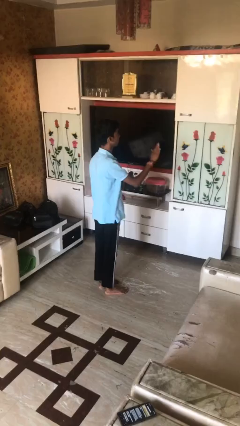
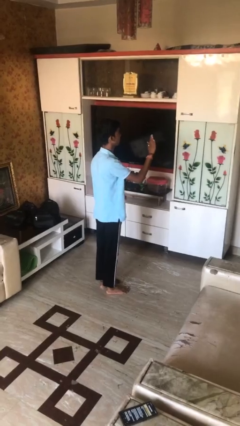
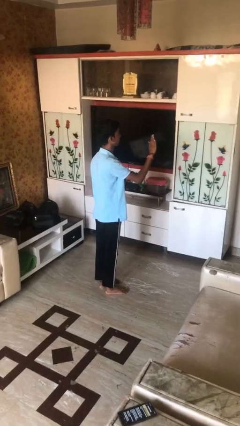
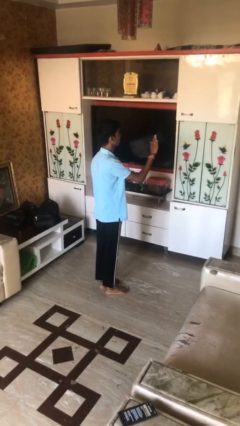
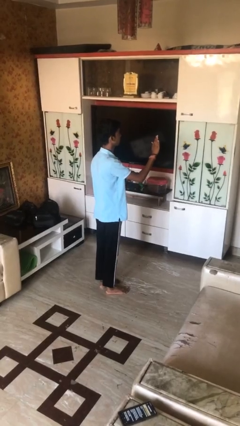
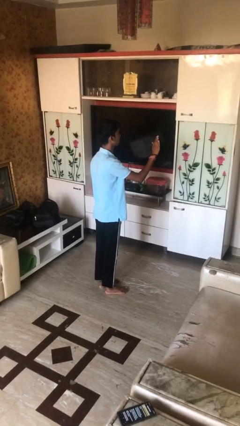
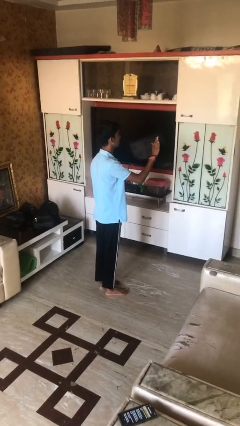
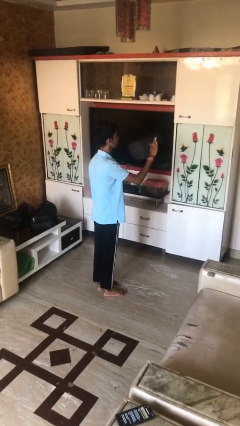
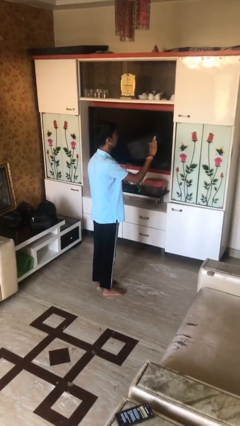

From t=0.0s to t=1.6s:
person gestures swipe up

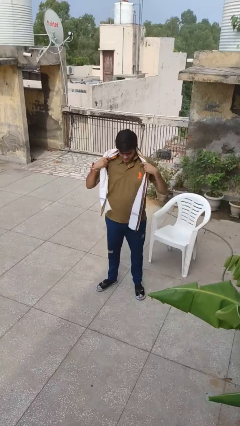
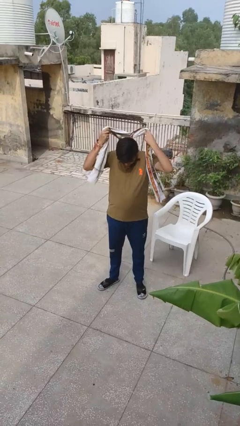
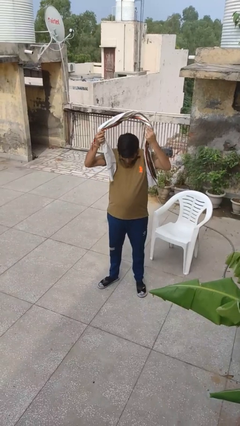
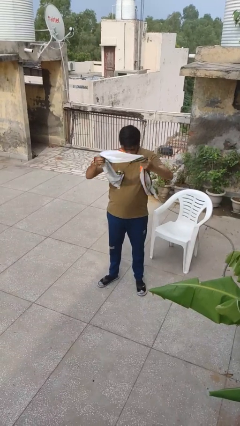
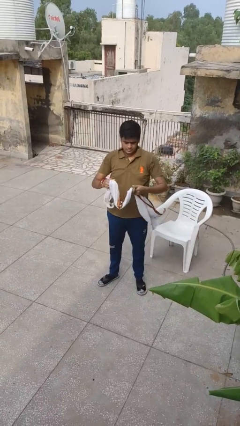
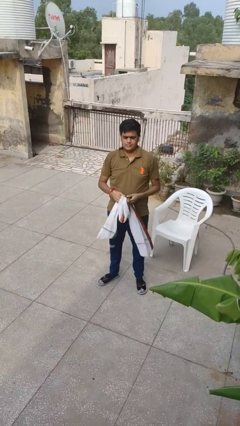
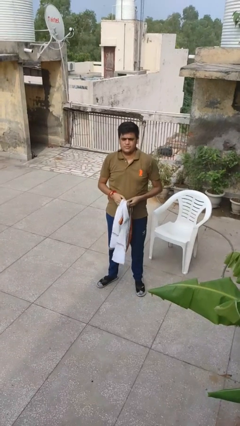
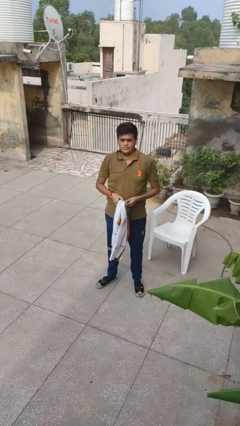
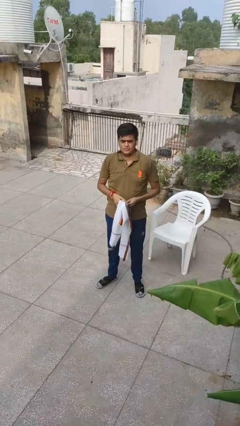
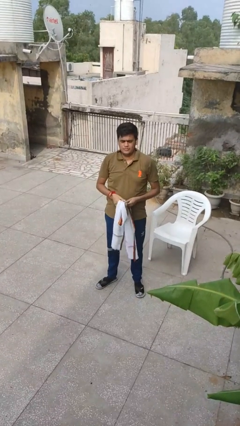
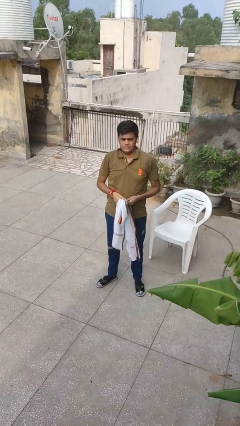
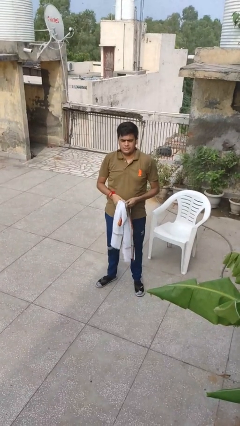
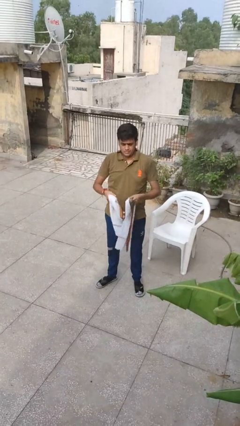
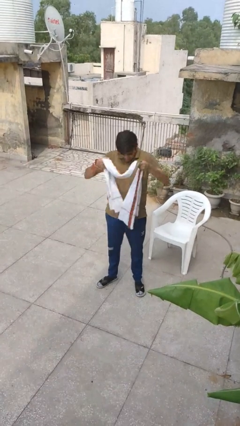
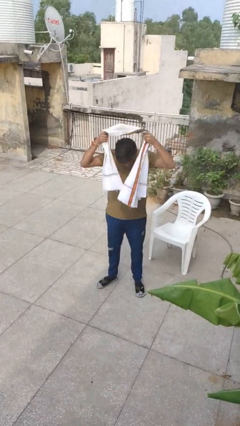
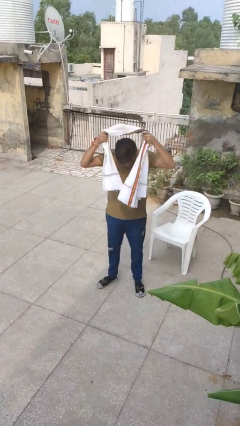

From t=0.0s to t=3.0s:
person takes off scarf

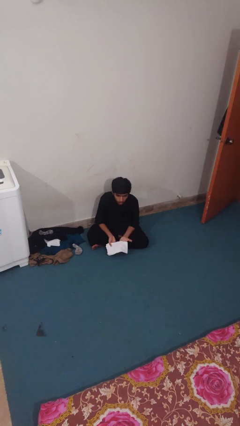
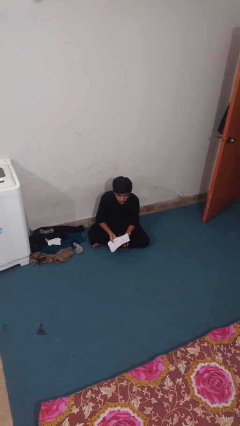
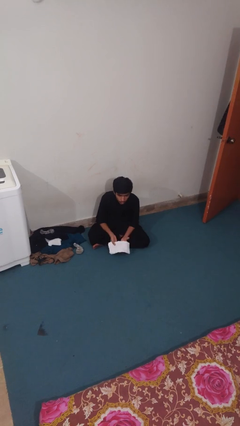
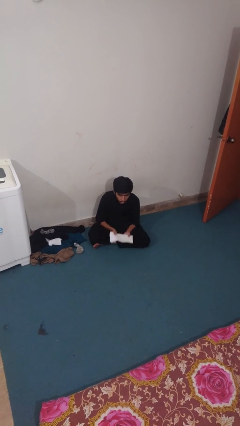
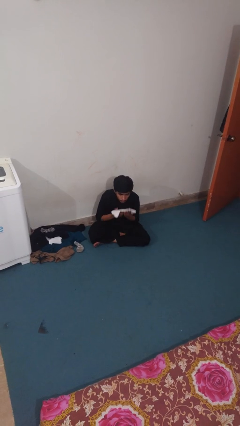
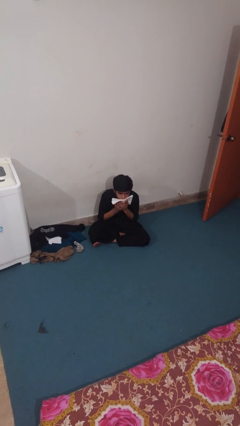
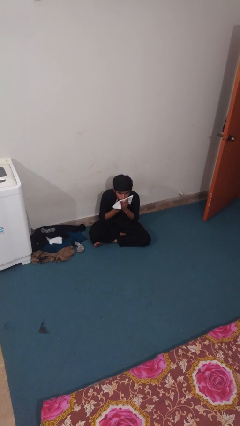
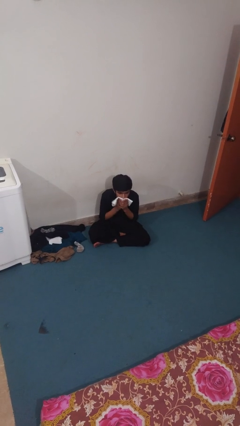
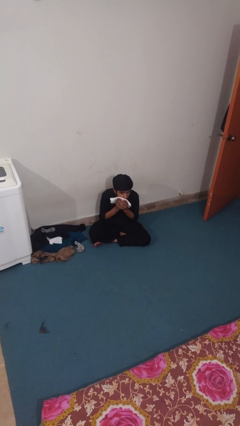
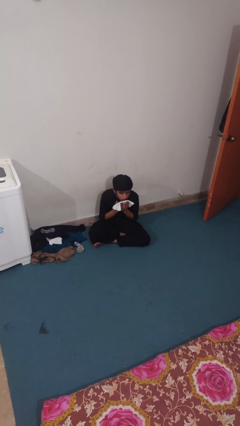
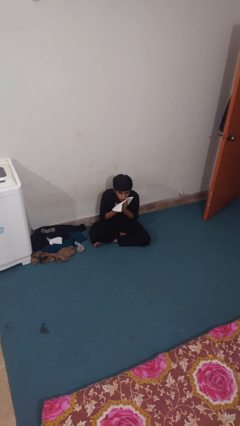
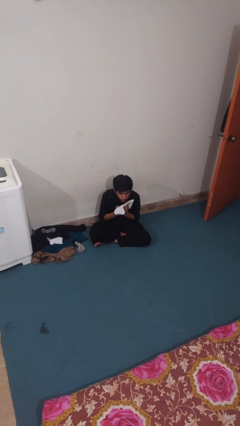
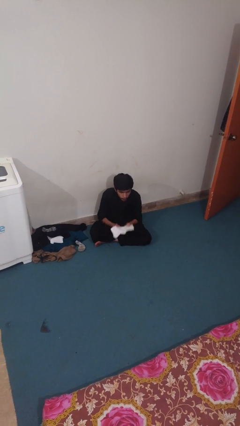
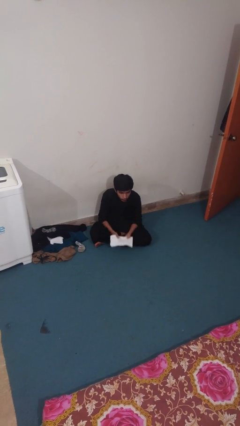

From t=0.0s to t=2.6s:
person wipes mouth with napkin

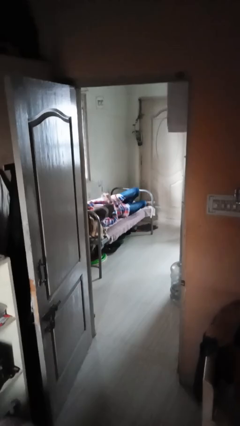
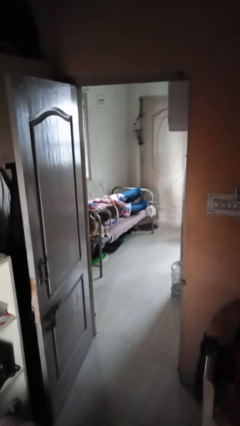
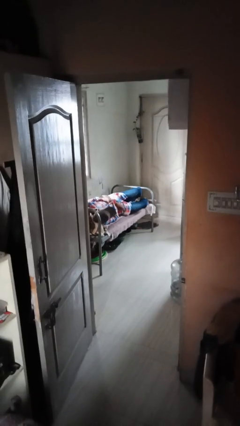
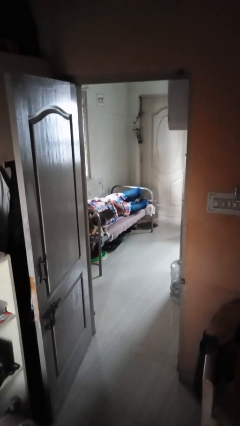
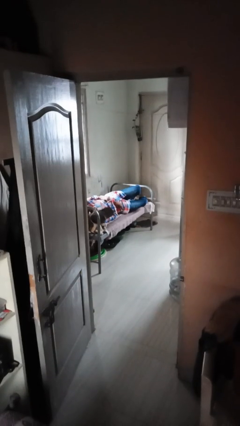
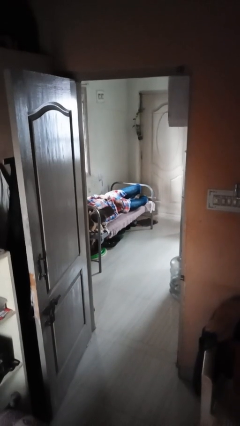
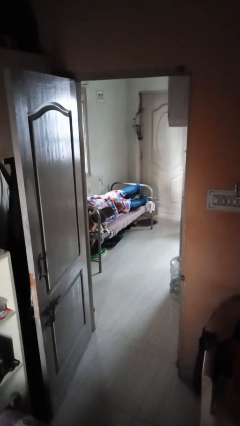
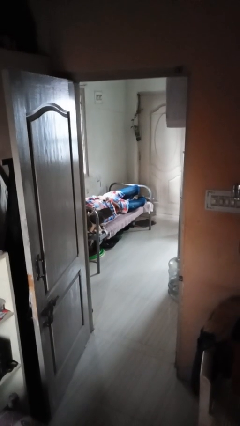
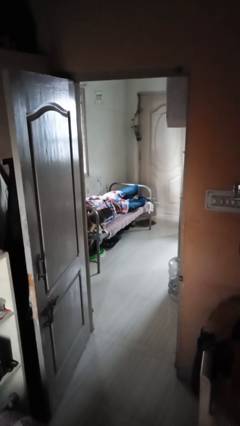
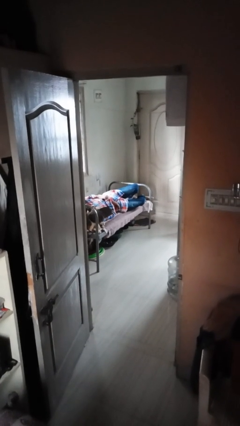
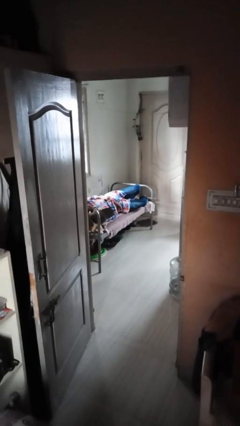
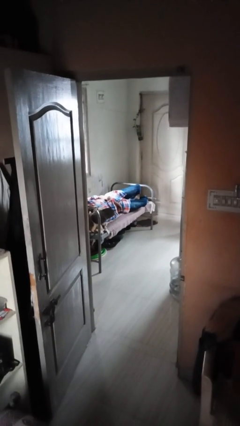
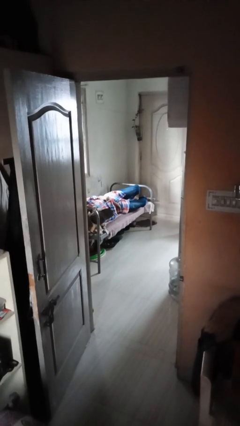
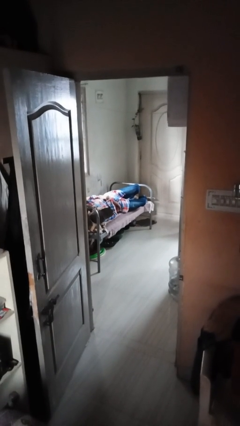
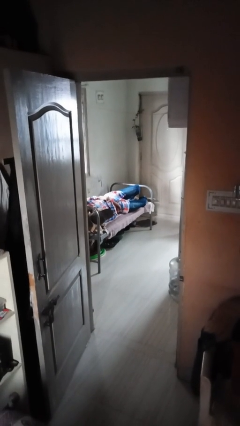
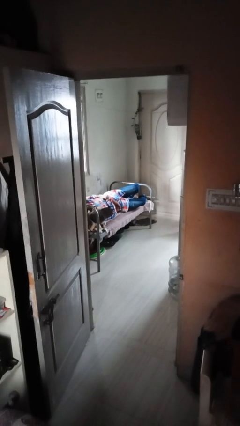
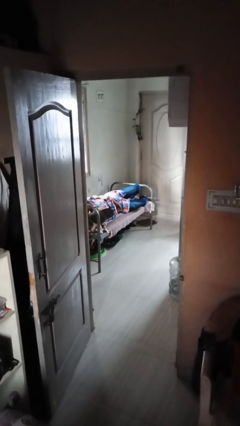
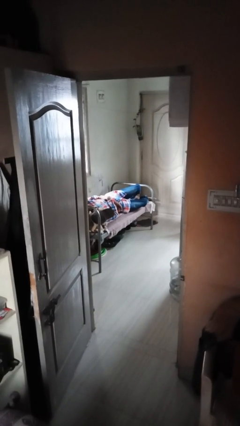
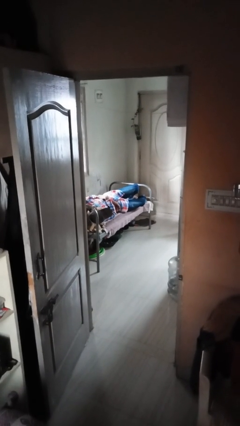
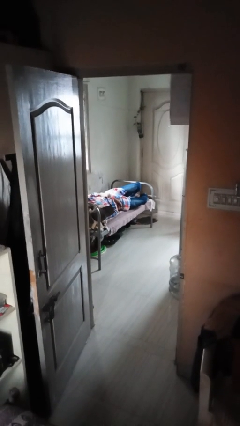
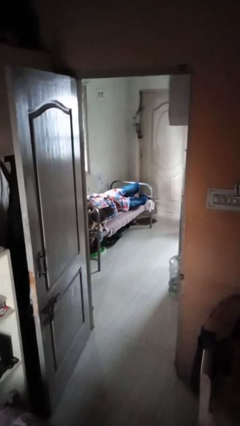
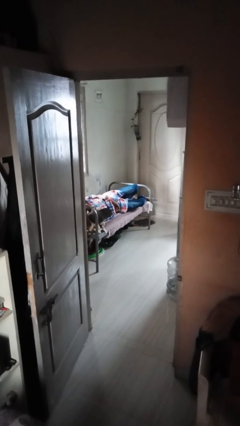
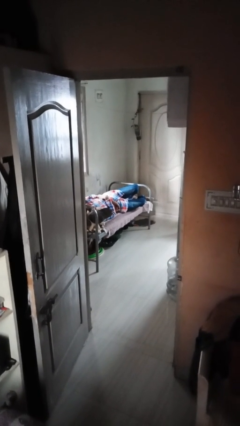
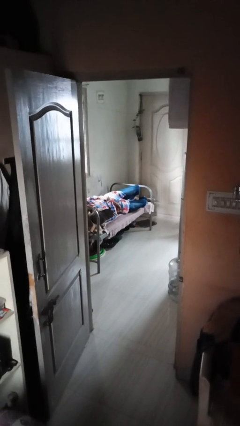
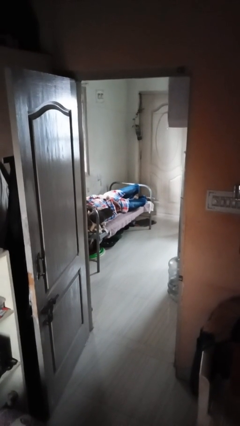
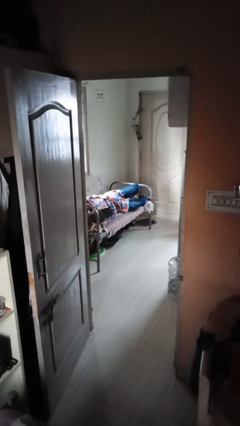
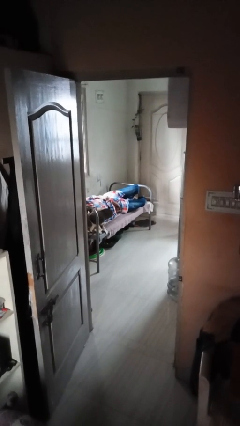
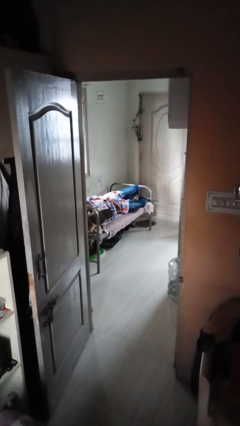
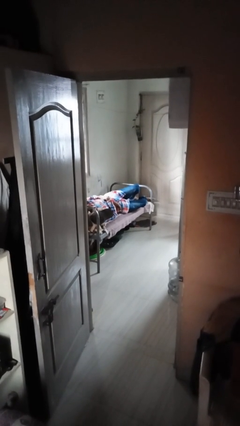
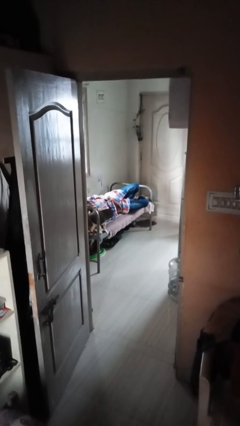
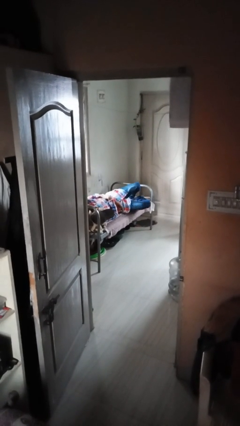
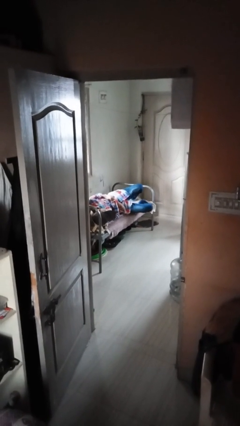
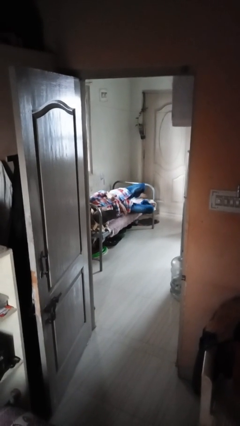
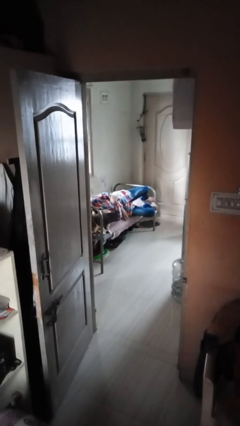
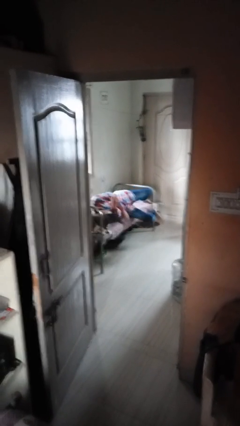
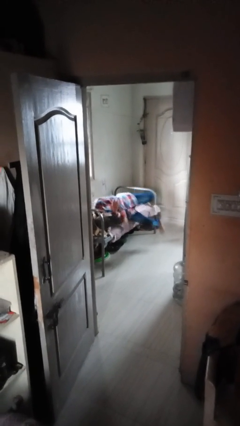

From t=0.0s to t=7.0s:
person falls from bed

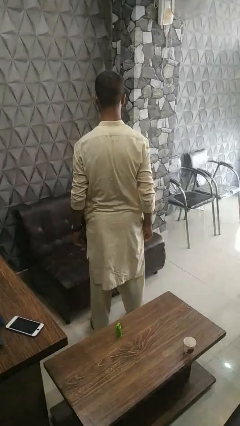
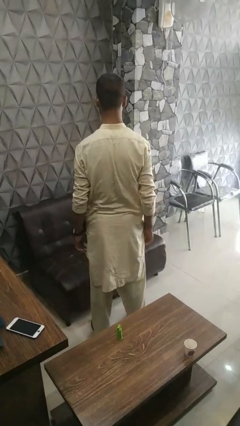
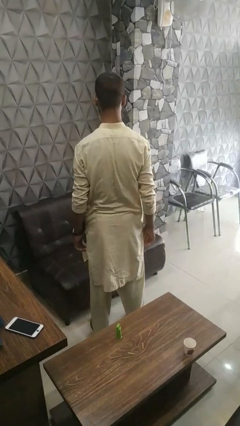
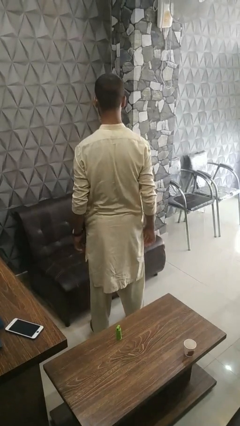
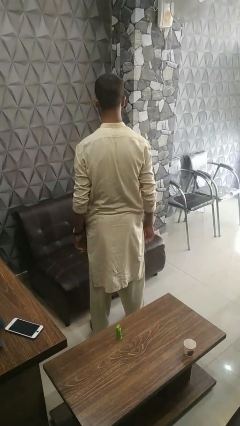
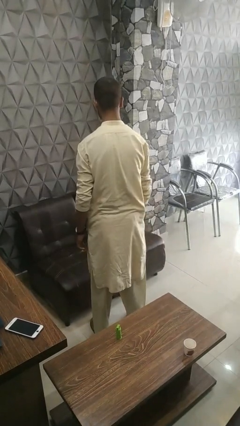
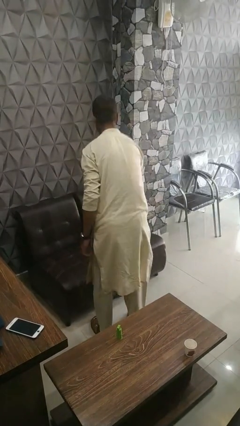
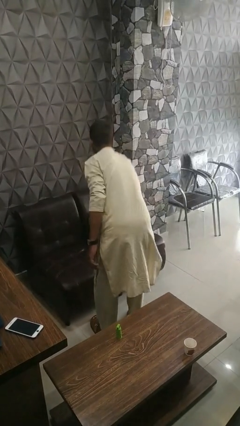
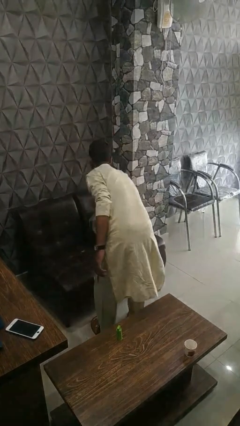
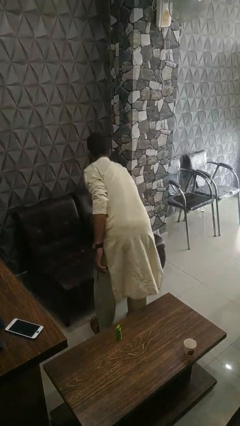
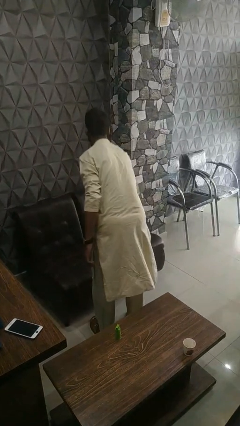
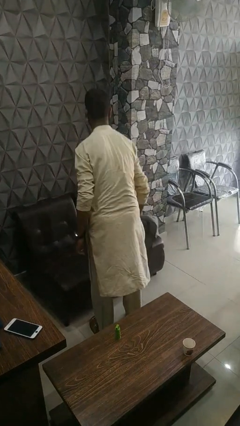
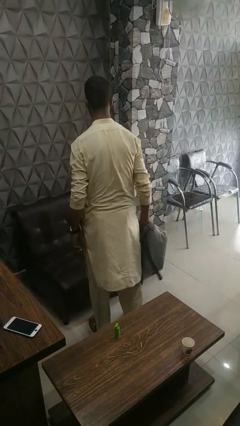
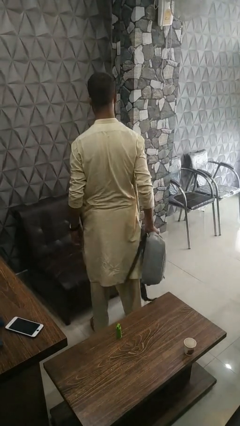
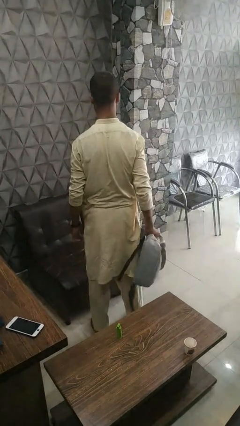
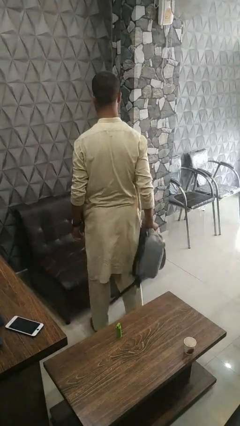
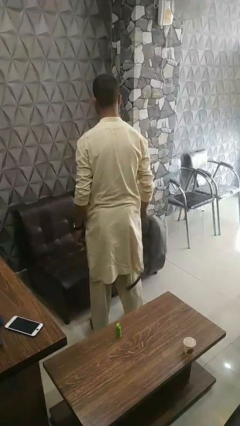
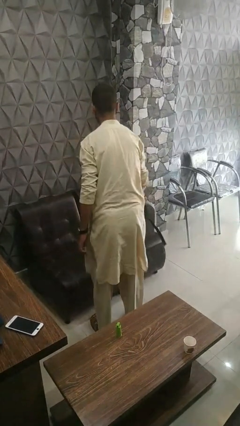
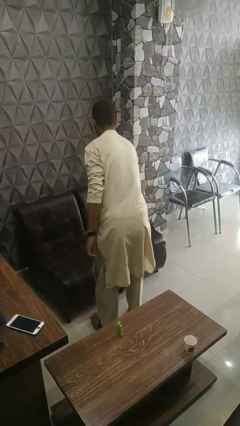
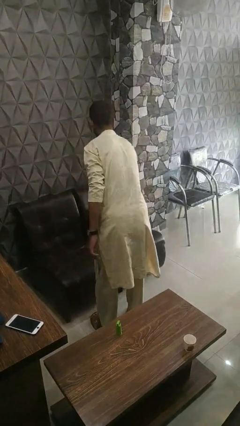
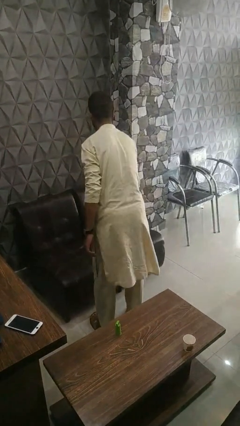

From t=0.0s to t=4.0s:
person searches in couch
